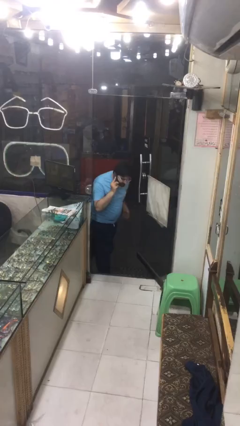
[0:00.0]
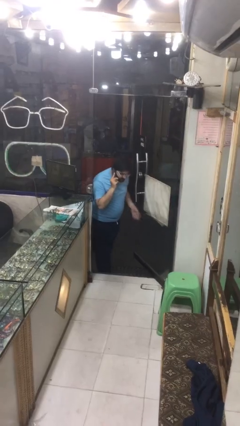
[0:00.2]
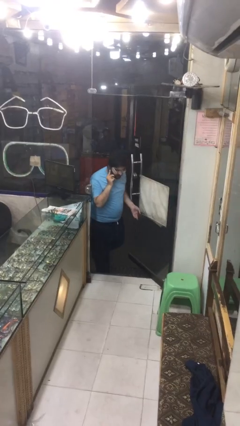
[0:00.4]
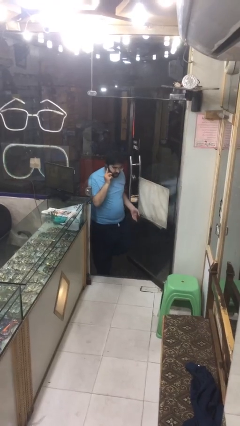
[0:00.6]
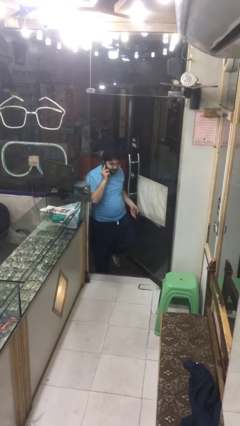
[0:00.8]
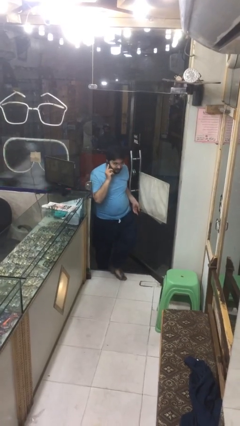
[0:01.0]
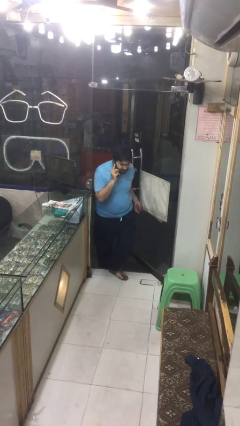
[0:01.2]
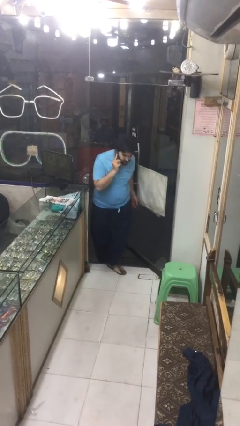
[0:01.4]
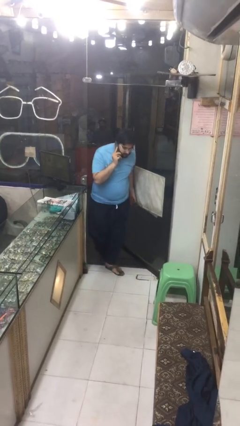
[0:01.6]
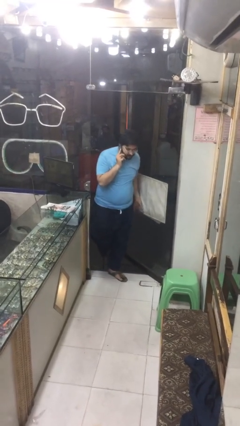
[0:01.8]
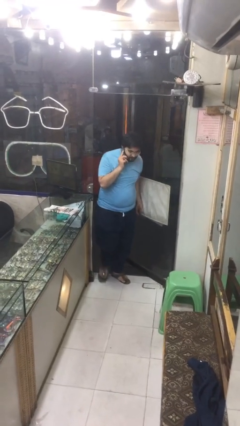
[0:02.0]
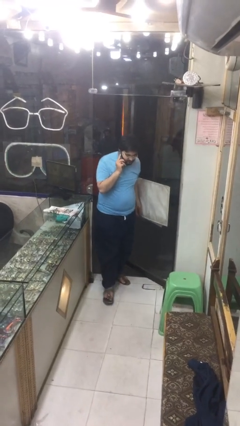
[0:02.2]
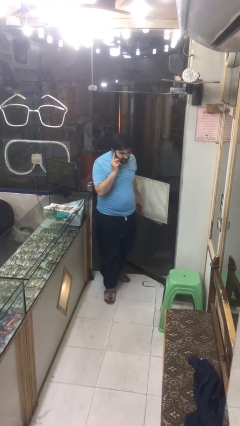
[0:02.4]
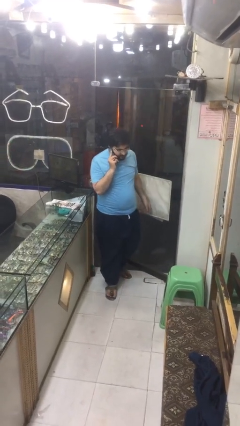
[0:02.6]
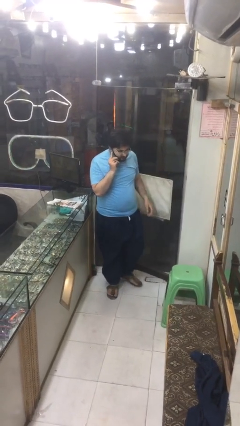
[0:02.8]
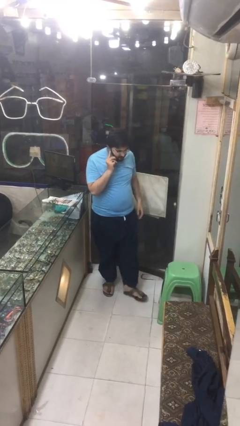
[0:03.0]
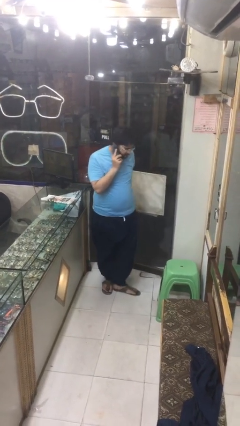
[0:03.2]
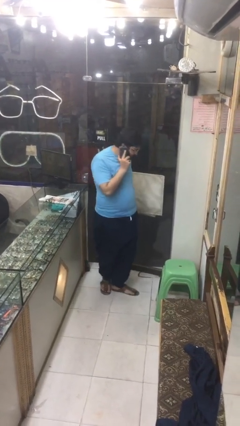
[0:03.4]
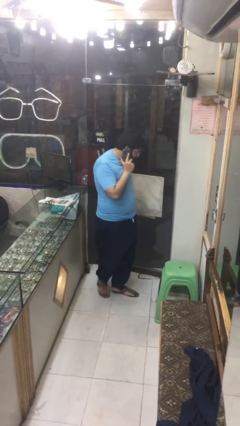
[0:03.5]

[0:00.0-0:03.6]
person enters scene through structure

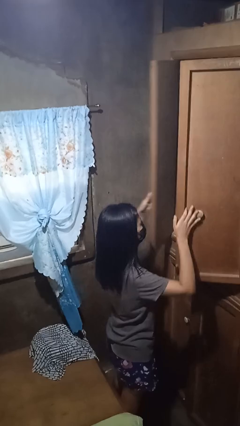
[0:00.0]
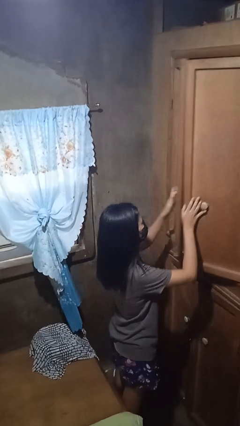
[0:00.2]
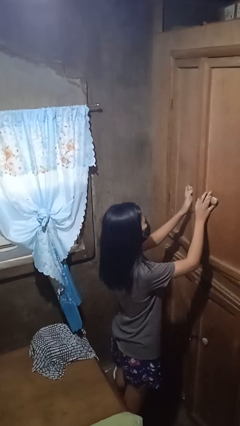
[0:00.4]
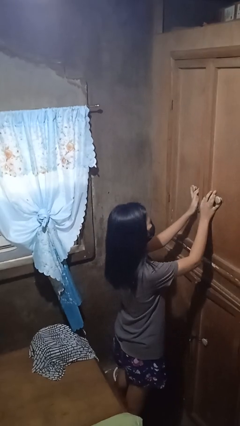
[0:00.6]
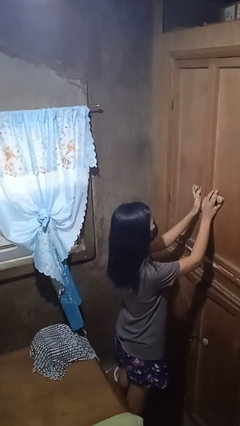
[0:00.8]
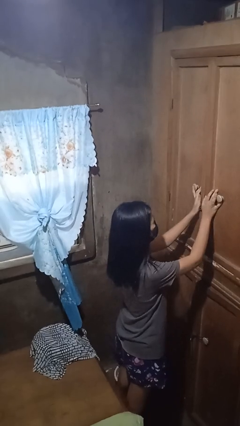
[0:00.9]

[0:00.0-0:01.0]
person closes closet door

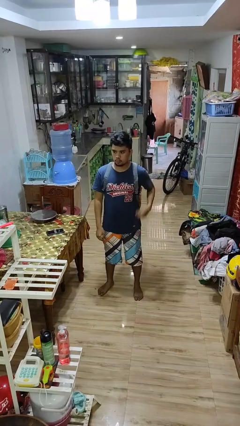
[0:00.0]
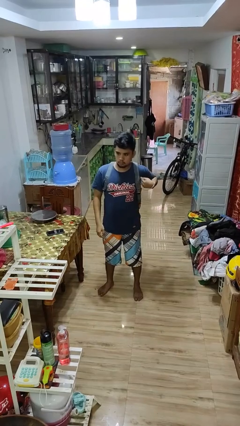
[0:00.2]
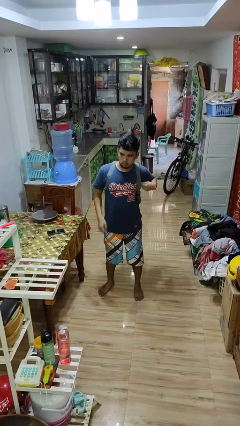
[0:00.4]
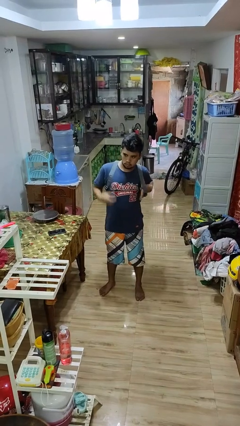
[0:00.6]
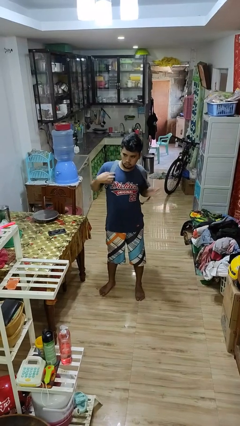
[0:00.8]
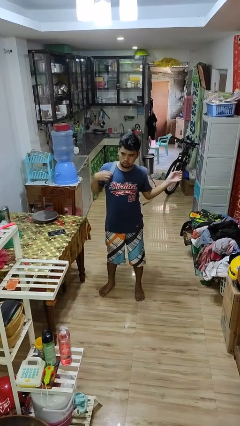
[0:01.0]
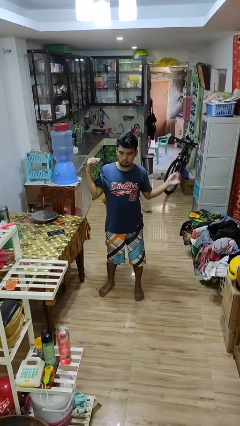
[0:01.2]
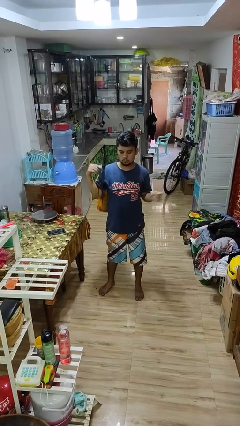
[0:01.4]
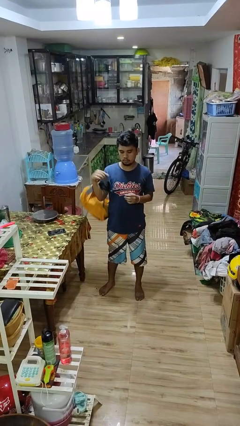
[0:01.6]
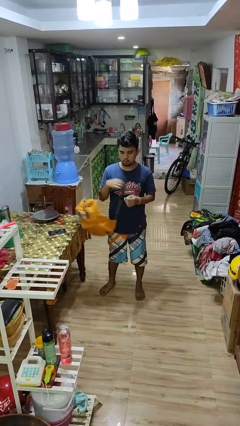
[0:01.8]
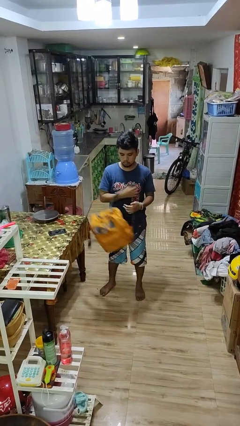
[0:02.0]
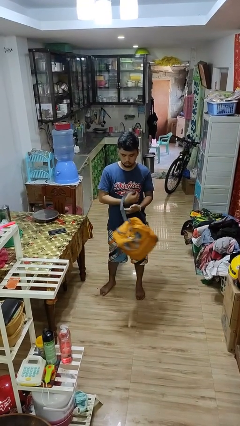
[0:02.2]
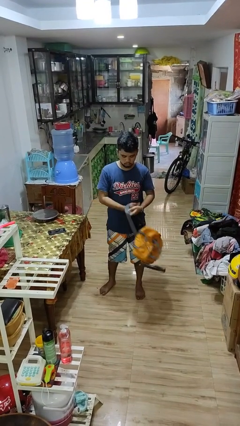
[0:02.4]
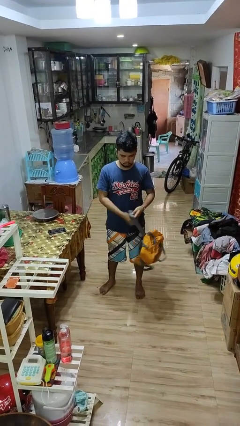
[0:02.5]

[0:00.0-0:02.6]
person takes off backpack

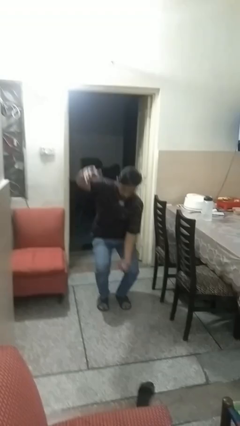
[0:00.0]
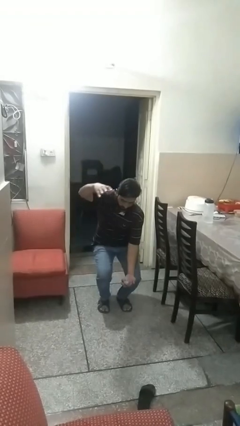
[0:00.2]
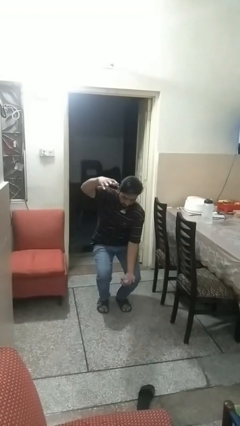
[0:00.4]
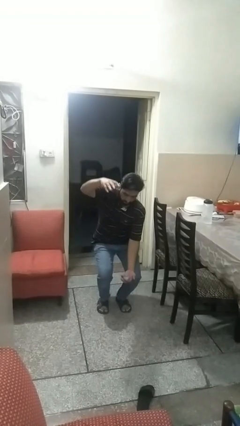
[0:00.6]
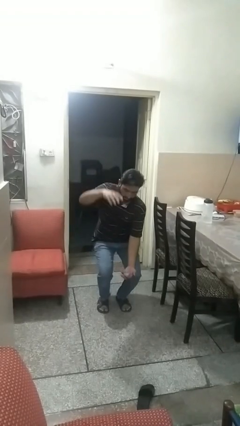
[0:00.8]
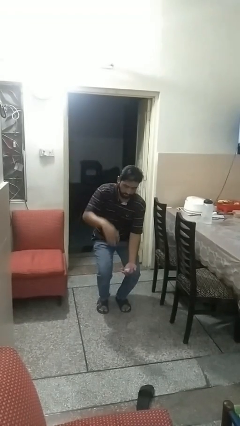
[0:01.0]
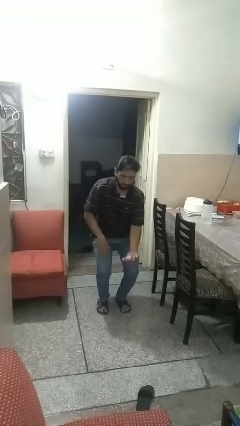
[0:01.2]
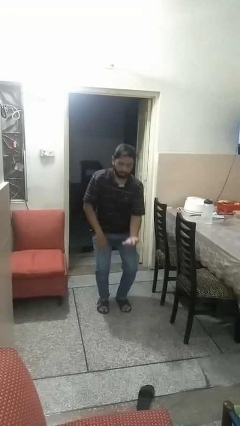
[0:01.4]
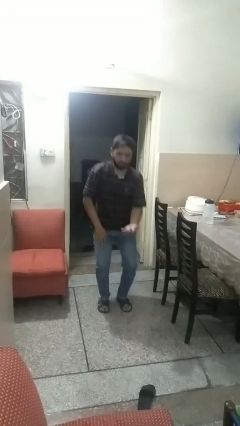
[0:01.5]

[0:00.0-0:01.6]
person catches dropped object

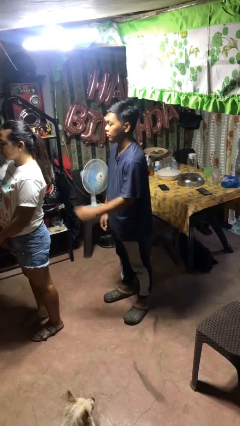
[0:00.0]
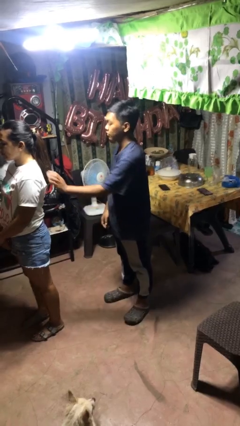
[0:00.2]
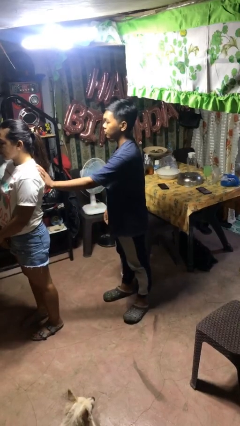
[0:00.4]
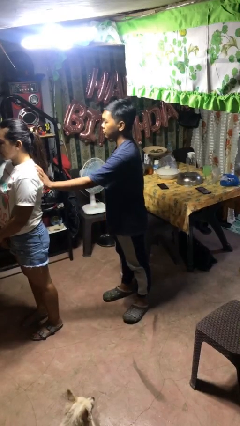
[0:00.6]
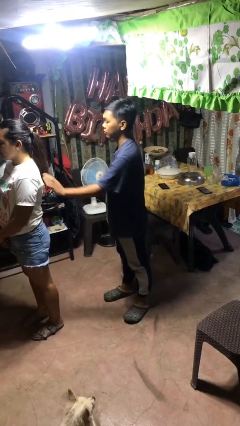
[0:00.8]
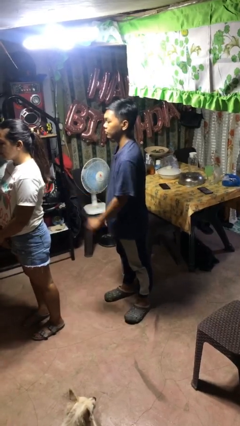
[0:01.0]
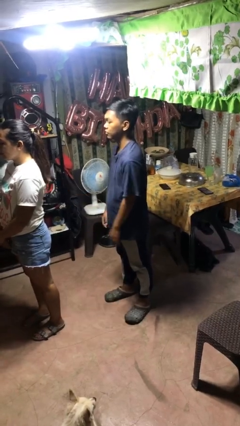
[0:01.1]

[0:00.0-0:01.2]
person touches back of person

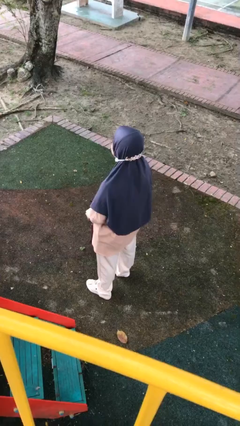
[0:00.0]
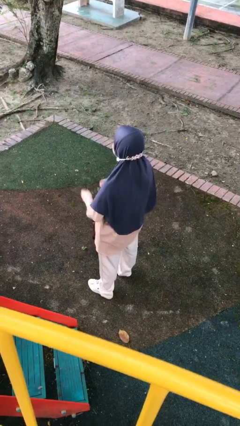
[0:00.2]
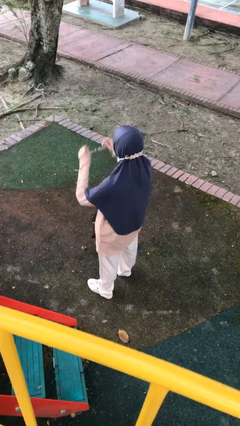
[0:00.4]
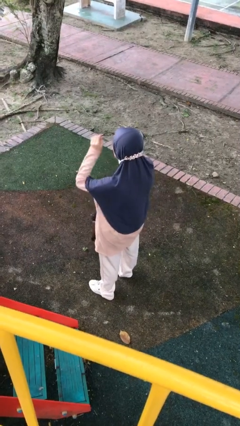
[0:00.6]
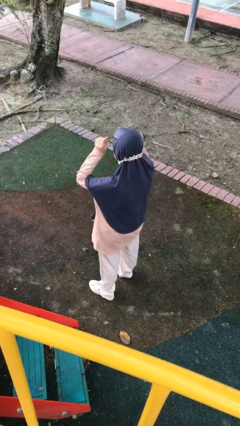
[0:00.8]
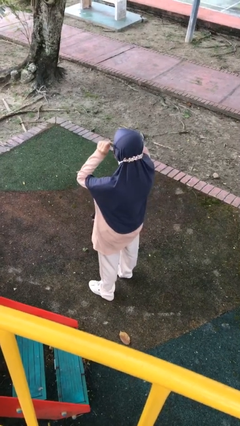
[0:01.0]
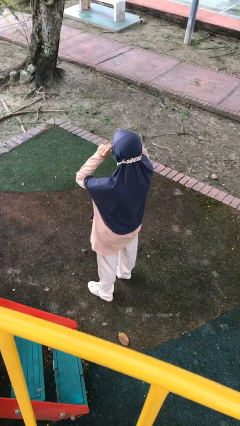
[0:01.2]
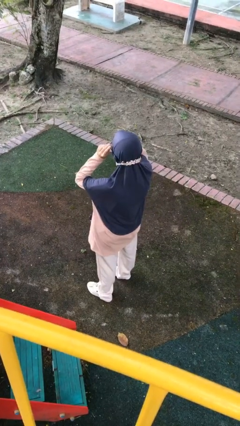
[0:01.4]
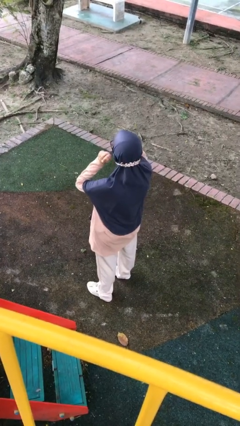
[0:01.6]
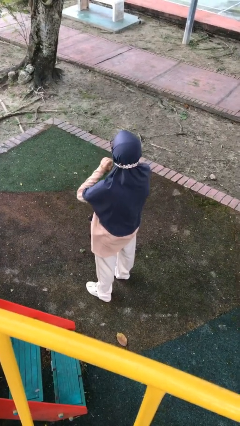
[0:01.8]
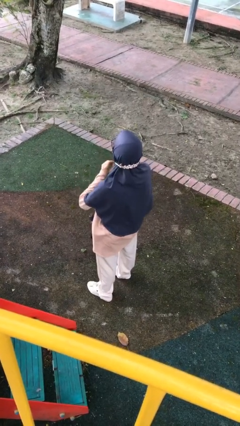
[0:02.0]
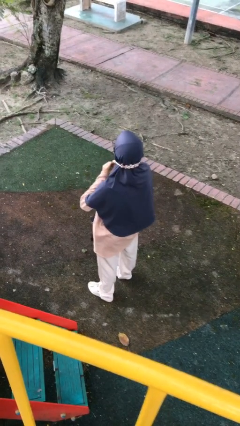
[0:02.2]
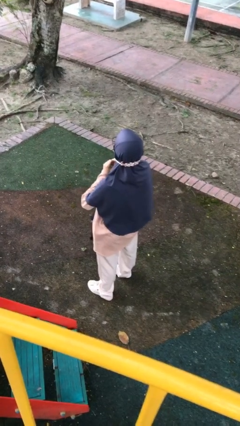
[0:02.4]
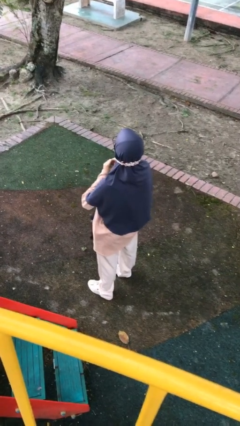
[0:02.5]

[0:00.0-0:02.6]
person puts on glasses

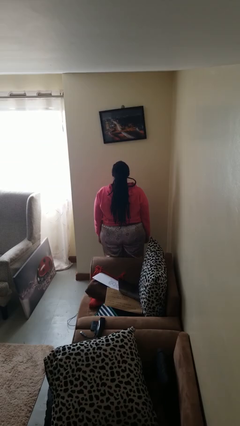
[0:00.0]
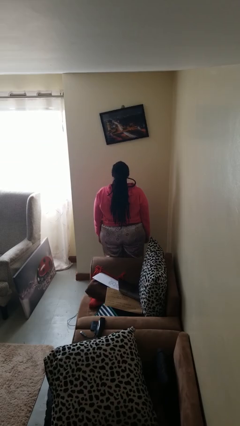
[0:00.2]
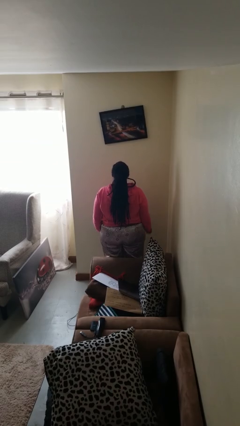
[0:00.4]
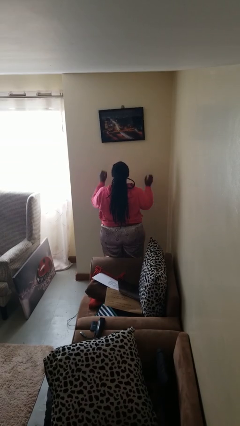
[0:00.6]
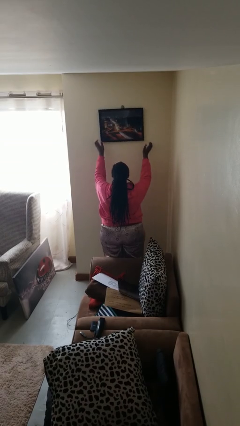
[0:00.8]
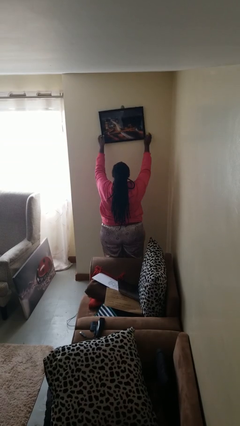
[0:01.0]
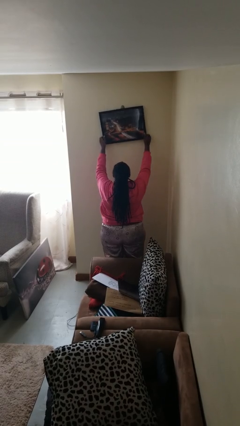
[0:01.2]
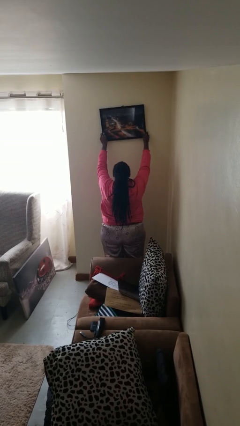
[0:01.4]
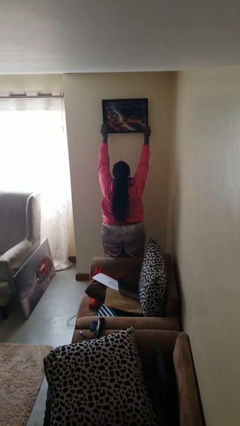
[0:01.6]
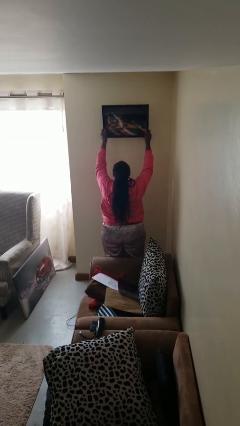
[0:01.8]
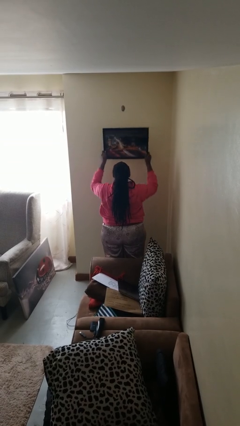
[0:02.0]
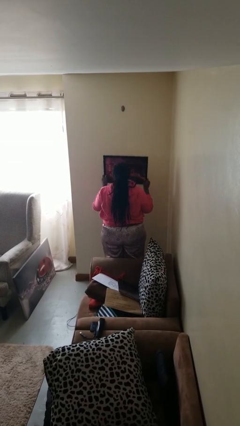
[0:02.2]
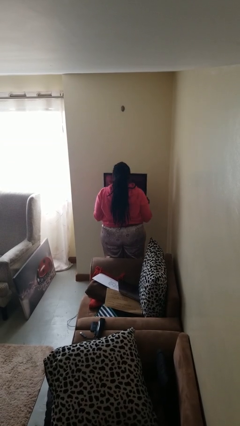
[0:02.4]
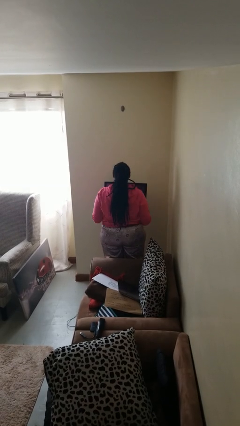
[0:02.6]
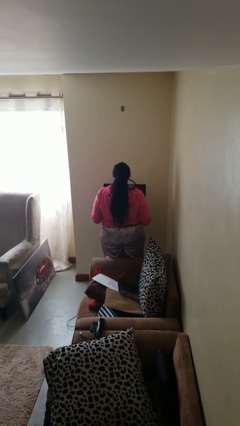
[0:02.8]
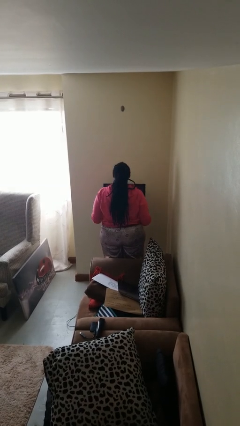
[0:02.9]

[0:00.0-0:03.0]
person takes down picture frame

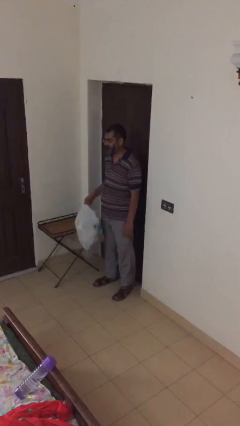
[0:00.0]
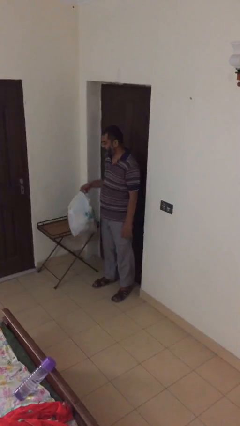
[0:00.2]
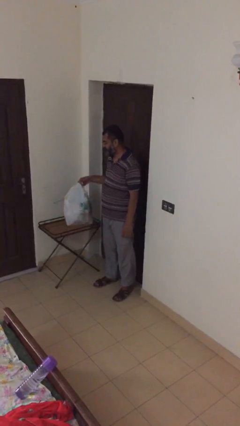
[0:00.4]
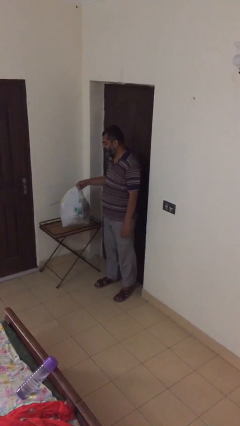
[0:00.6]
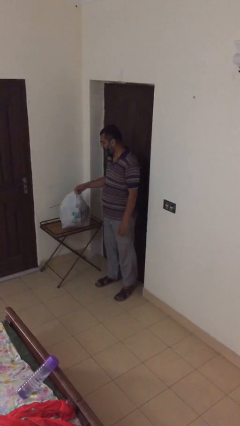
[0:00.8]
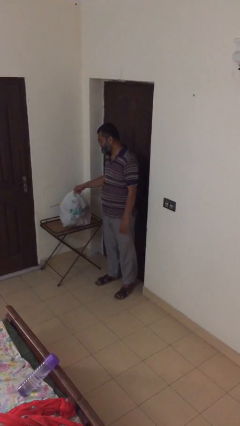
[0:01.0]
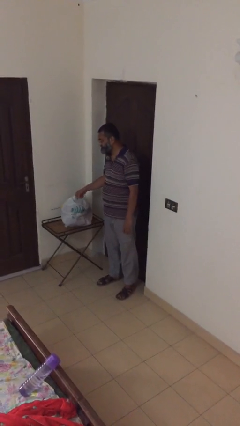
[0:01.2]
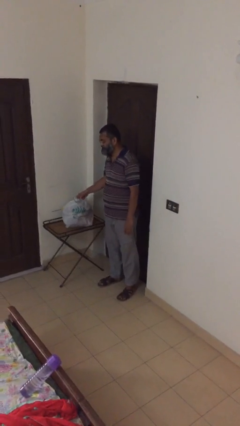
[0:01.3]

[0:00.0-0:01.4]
person puts down object on table
